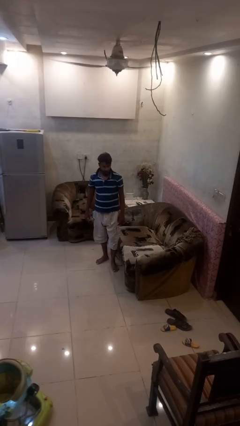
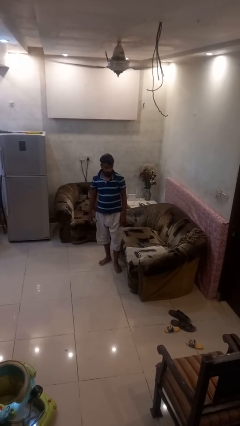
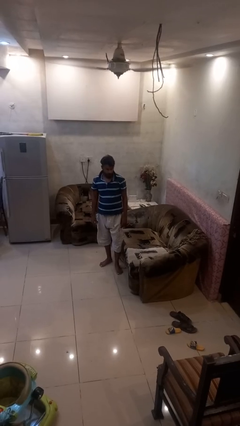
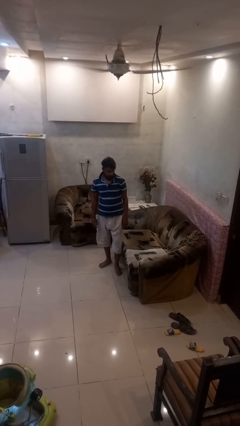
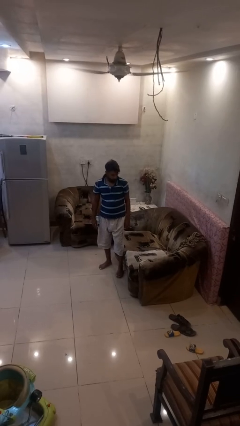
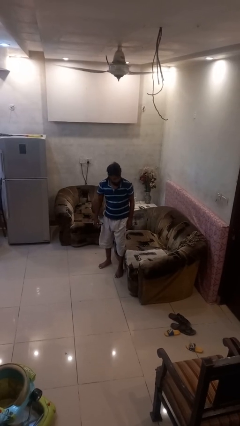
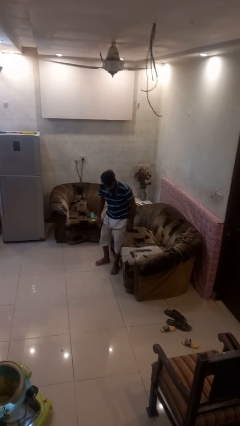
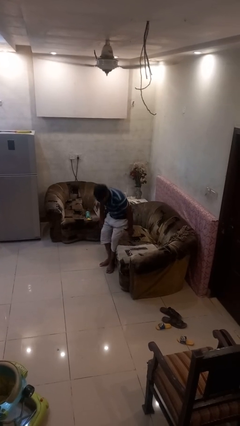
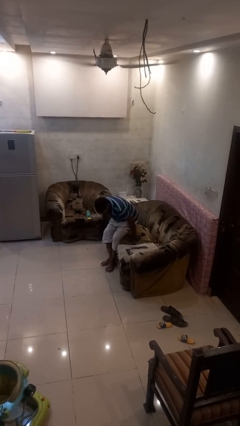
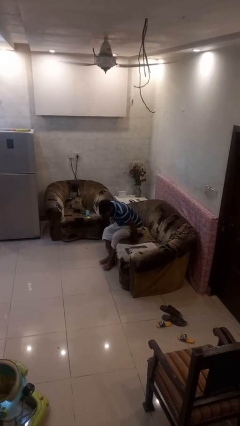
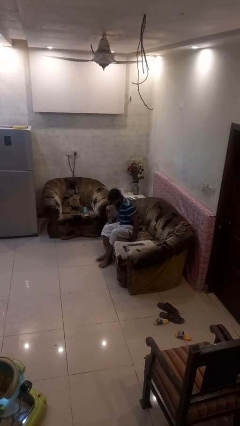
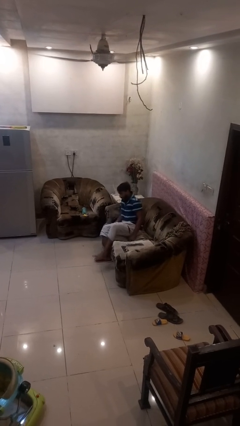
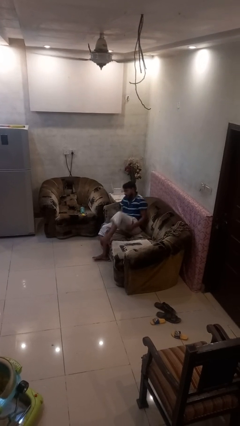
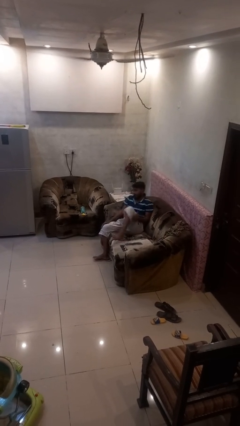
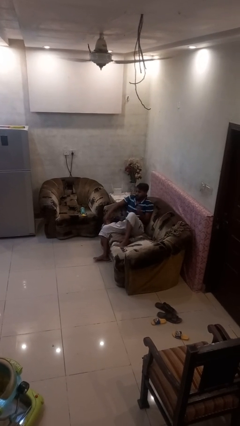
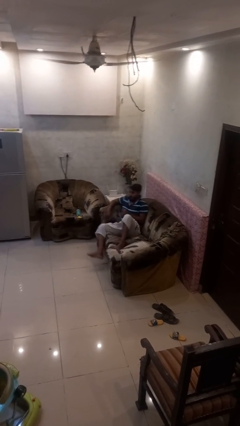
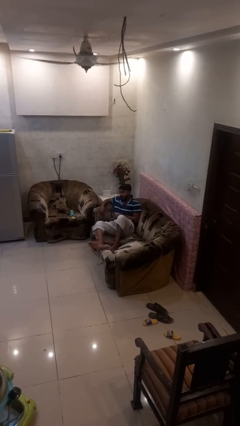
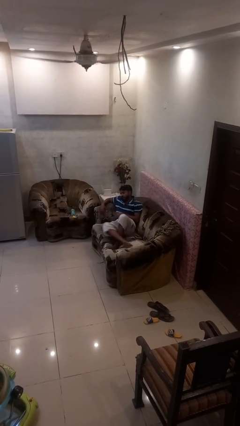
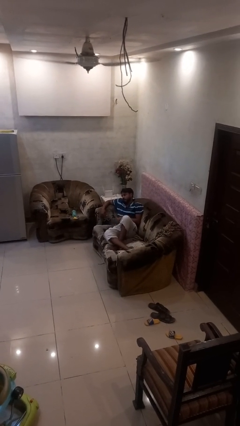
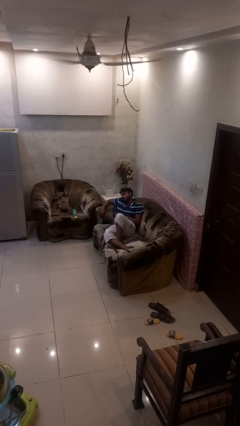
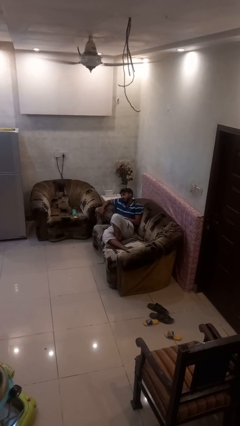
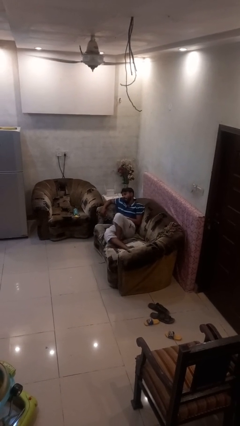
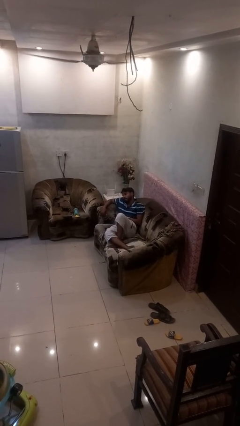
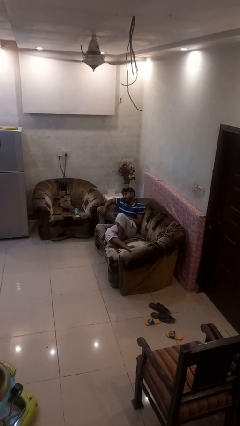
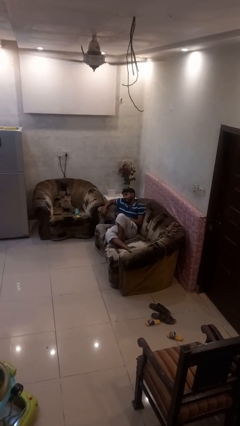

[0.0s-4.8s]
person lies down on couch

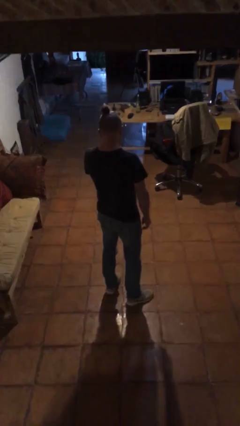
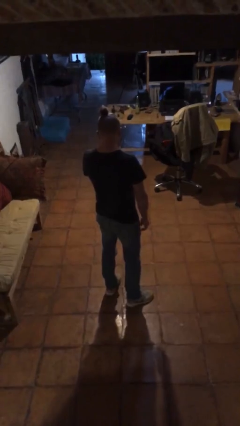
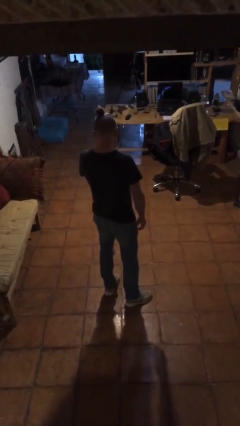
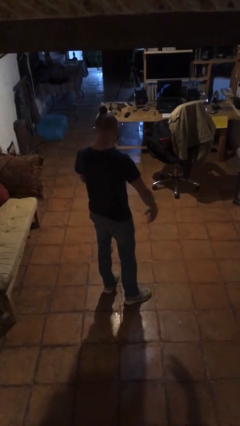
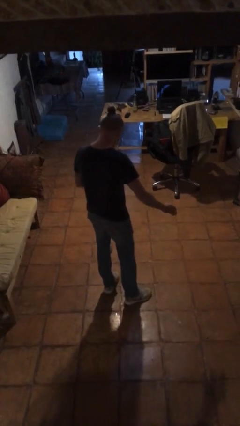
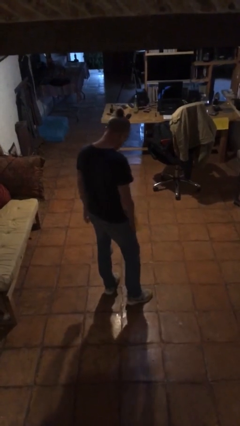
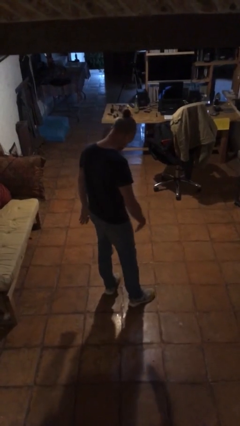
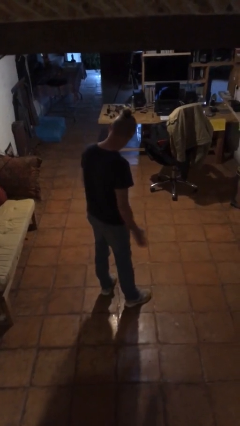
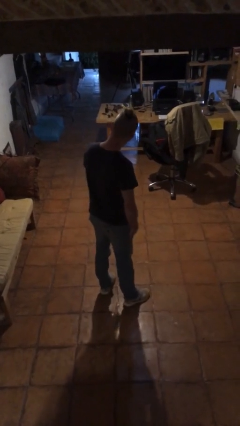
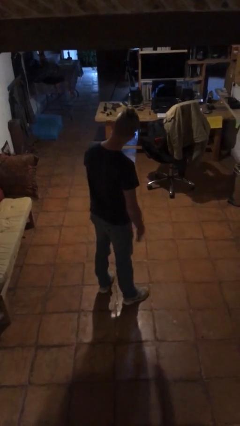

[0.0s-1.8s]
person slaps hands on thighs

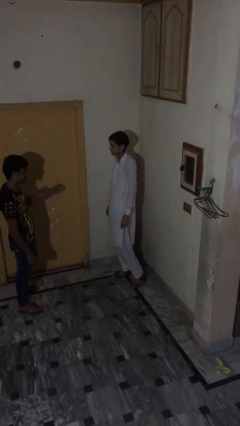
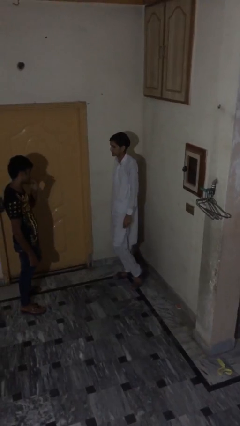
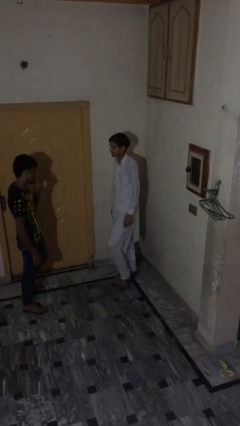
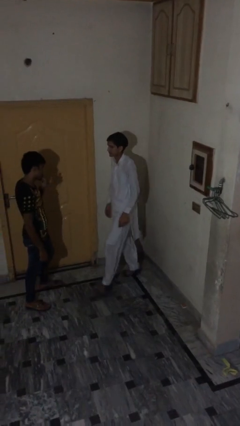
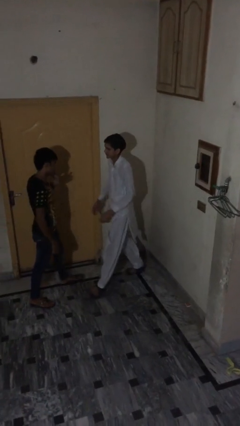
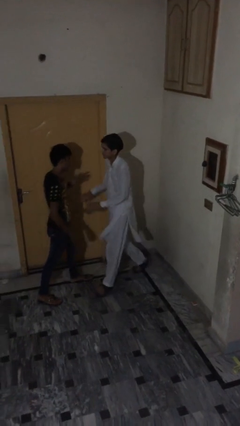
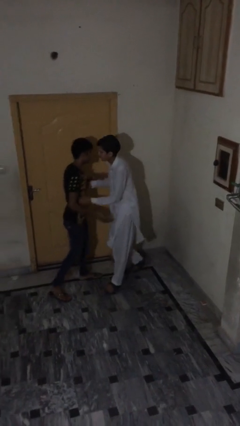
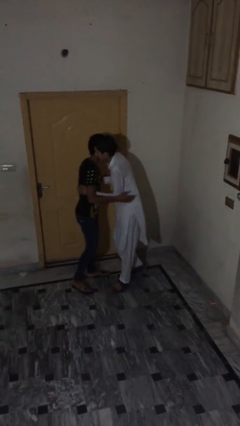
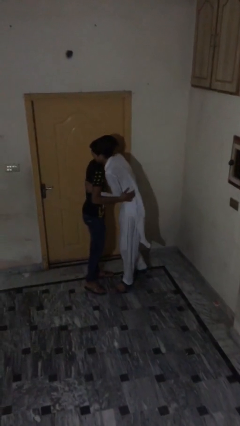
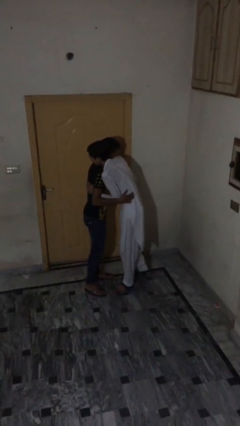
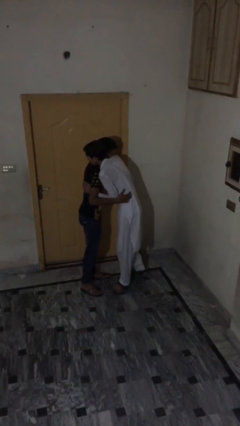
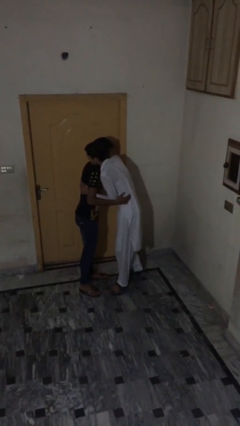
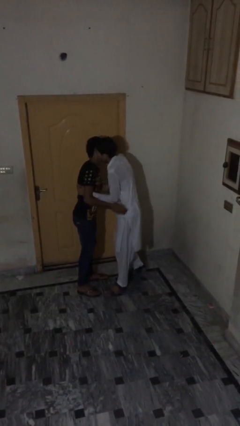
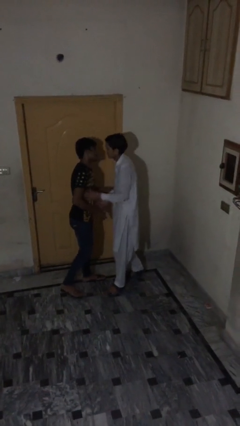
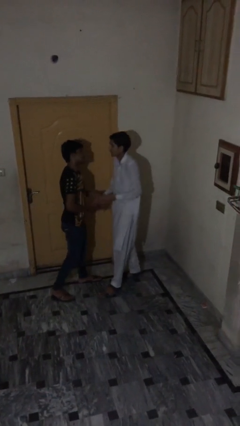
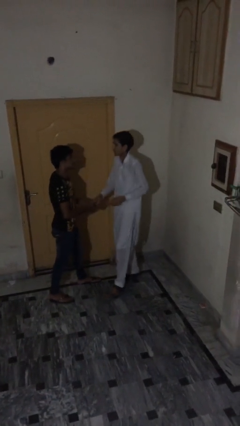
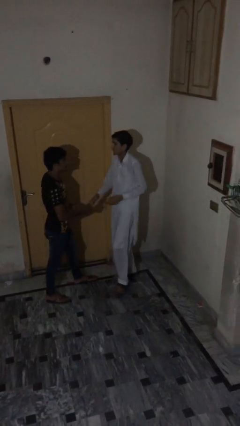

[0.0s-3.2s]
person embraces person

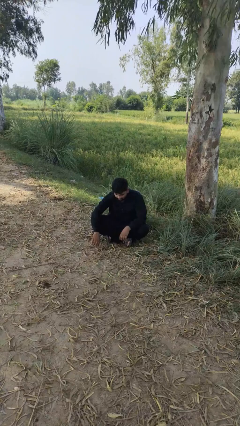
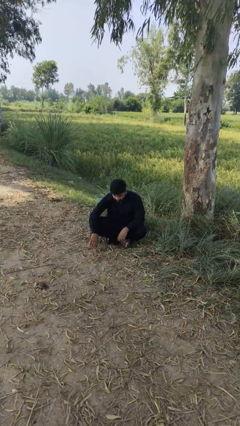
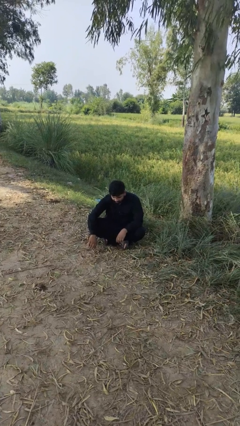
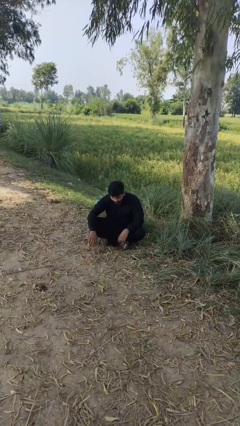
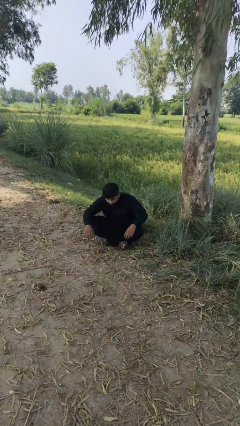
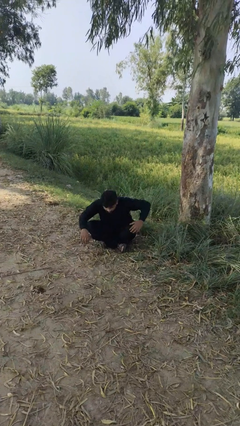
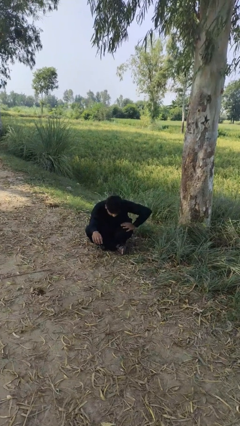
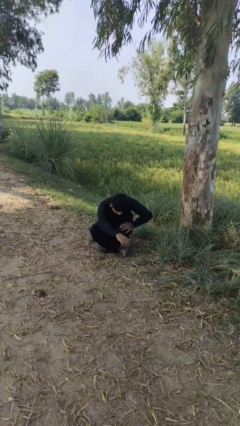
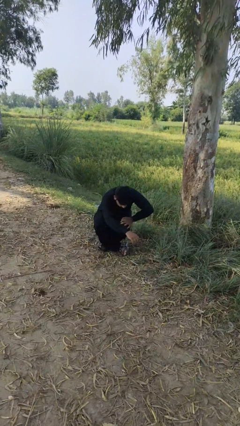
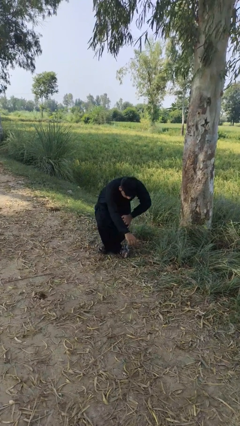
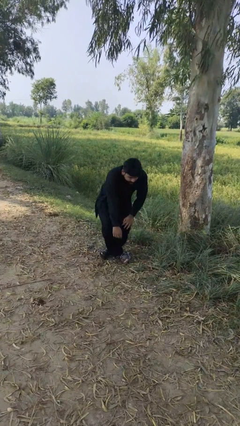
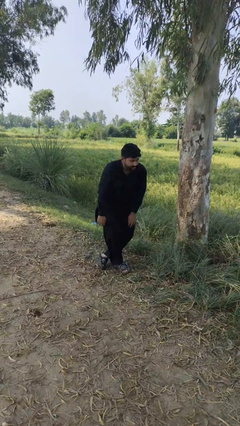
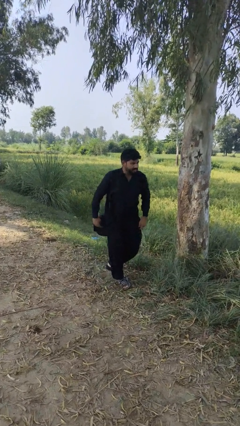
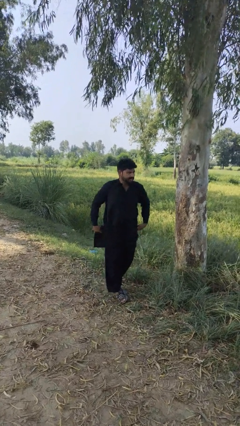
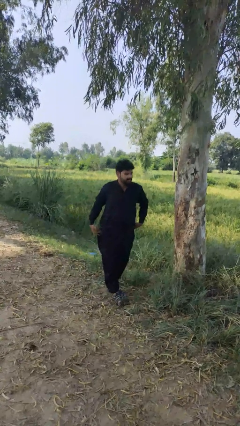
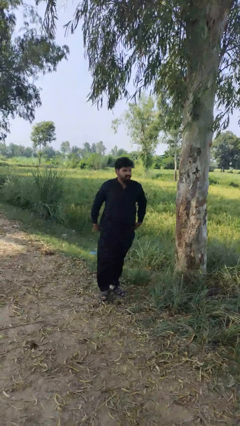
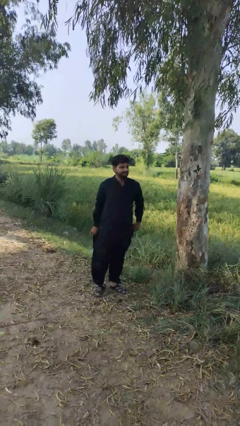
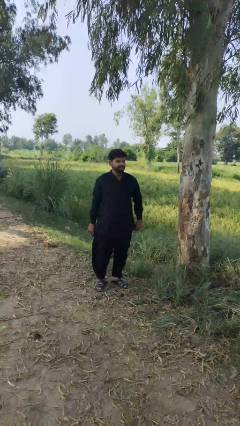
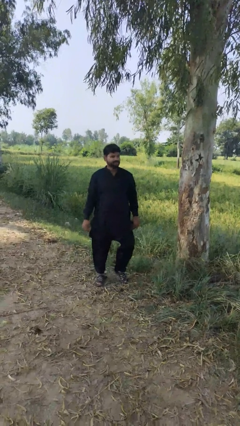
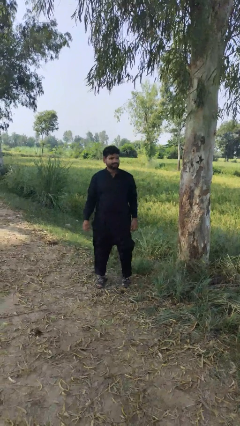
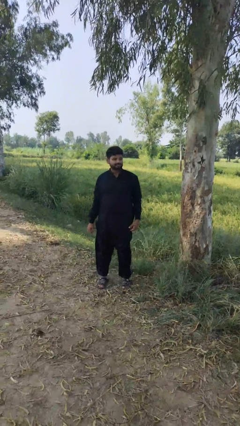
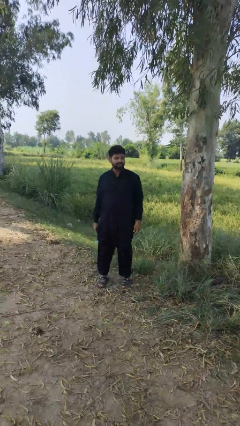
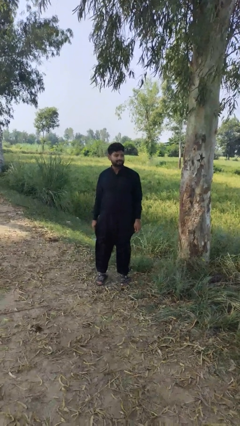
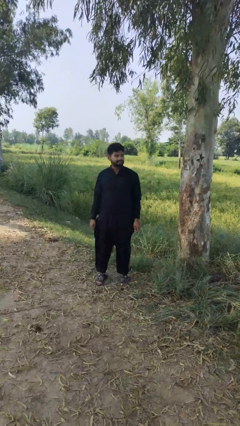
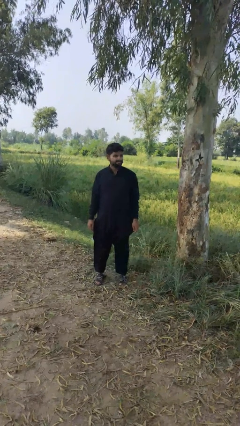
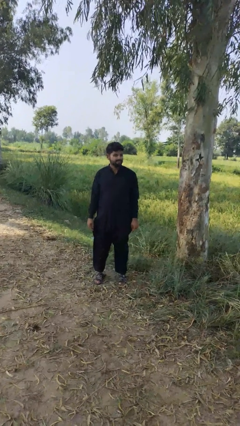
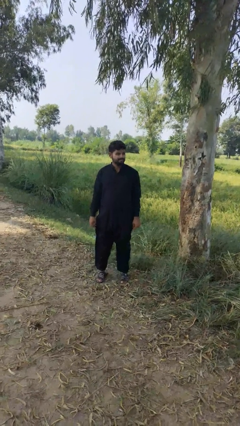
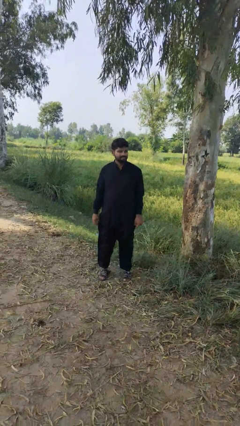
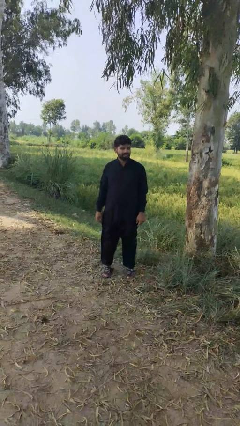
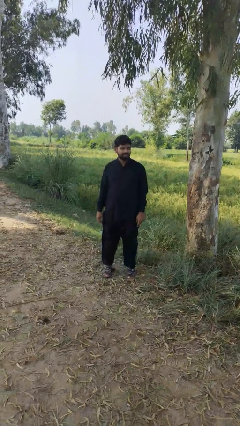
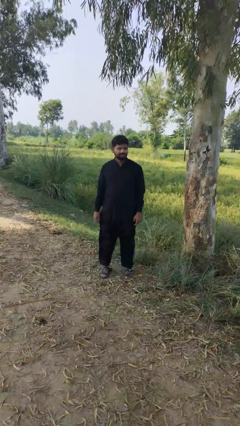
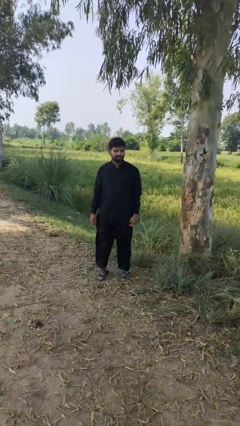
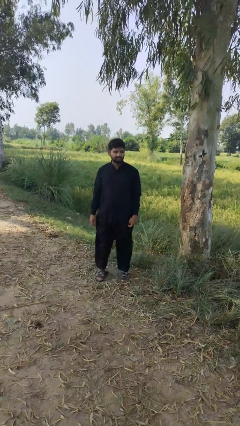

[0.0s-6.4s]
person stands up from floor

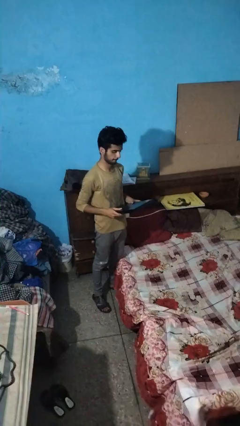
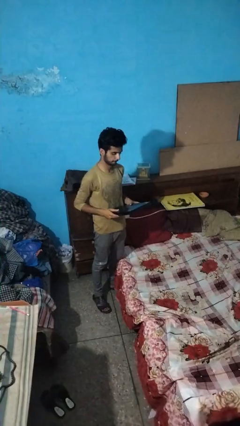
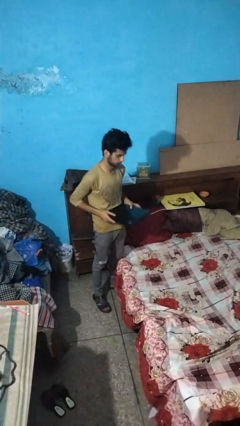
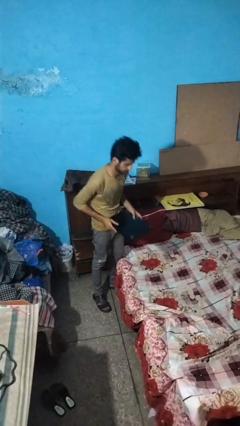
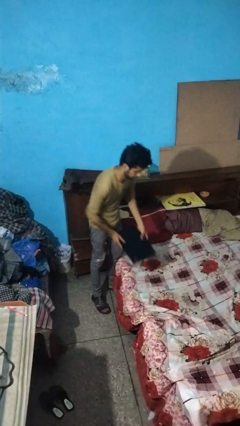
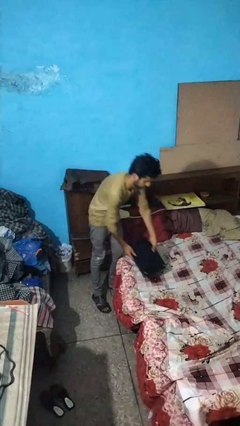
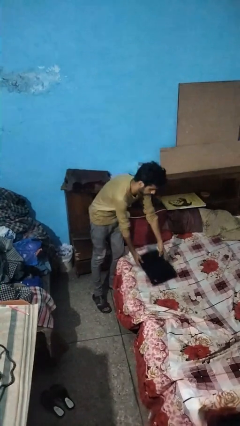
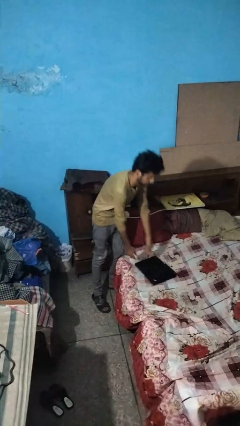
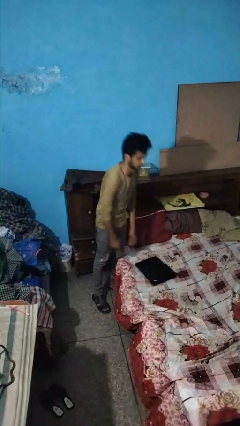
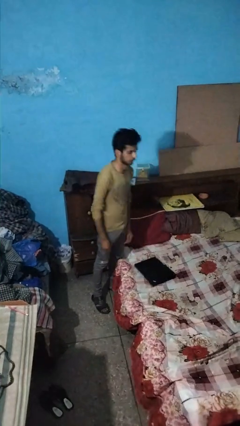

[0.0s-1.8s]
person puts down object on bed
